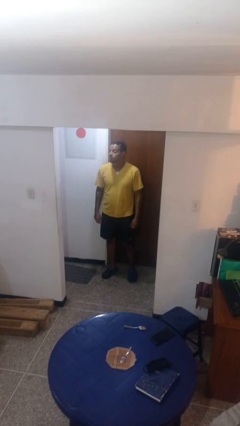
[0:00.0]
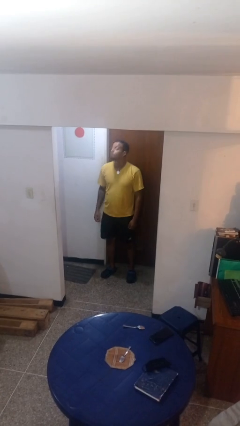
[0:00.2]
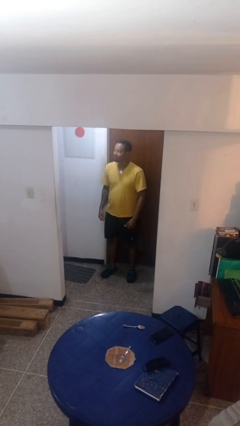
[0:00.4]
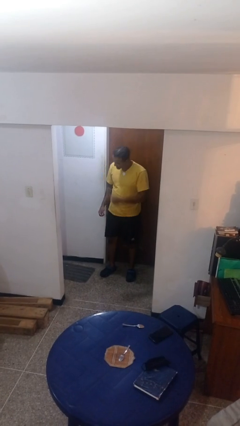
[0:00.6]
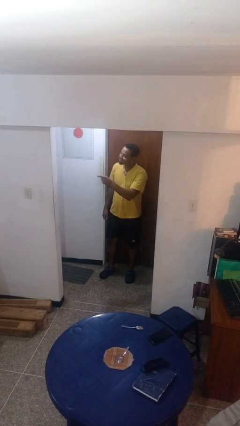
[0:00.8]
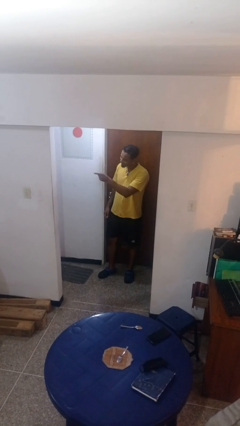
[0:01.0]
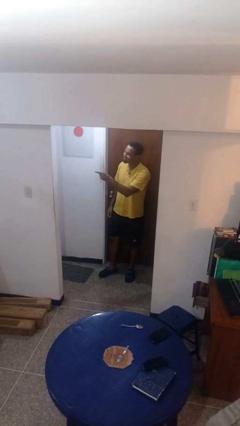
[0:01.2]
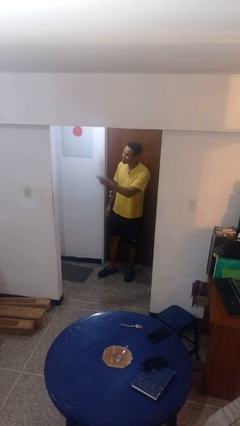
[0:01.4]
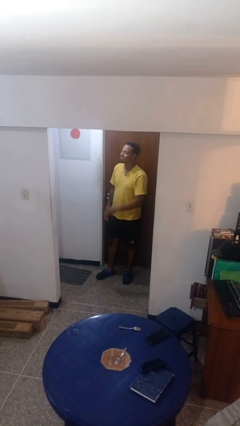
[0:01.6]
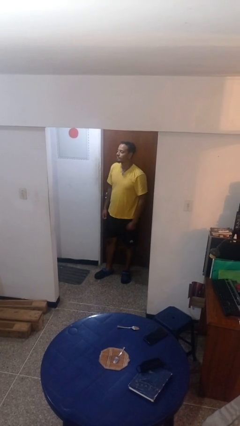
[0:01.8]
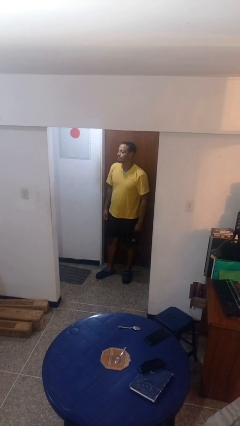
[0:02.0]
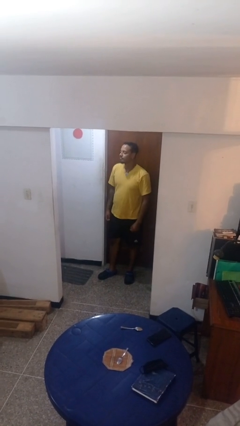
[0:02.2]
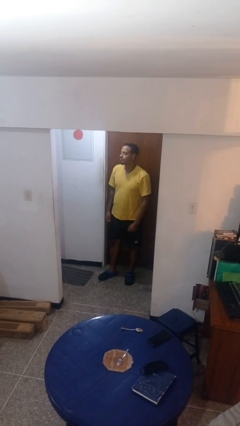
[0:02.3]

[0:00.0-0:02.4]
person nods head

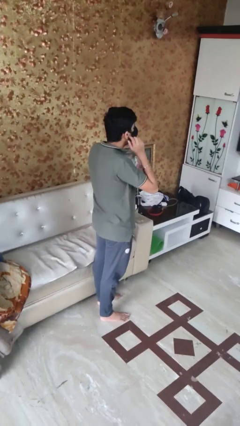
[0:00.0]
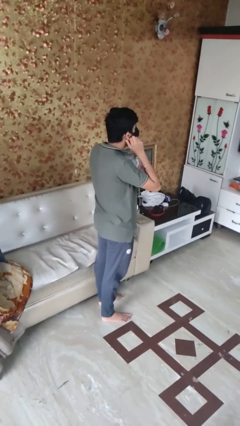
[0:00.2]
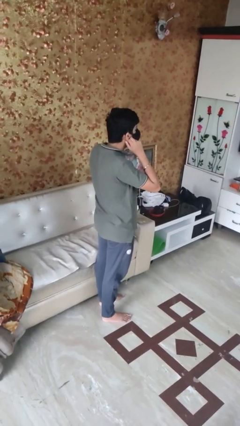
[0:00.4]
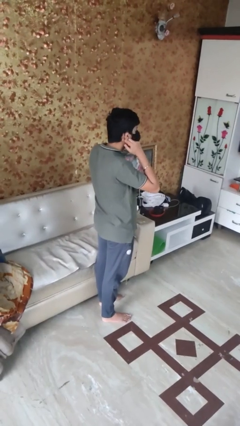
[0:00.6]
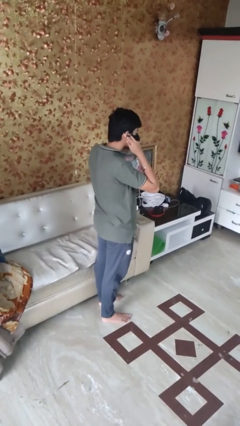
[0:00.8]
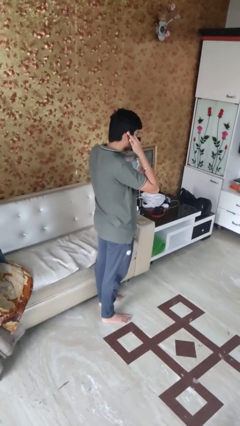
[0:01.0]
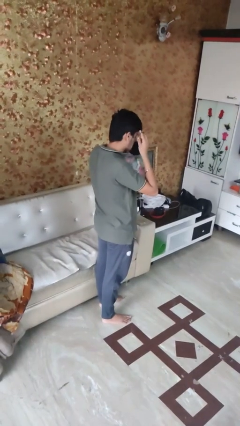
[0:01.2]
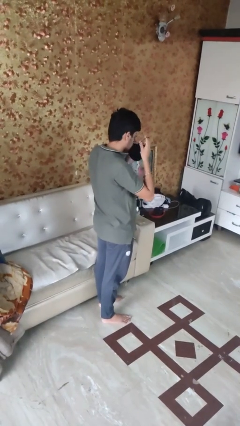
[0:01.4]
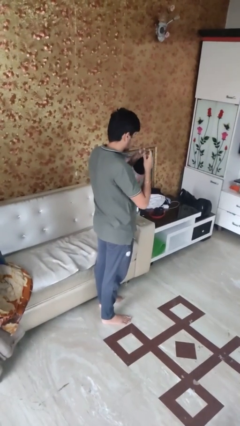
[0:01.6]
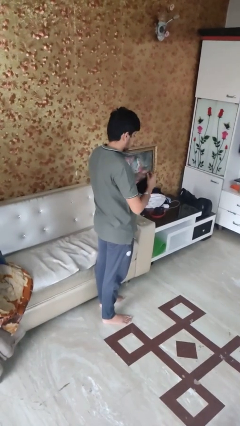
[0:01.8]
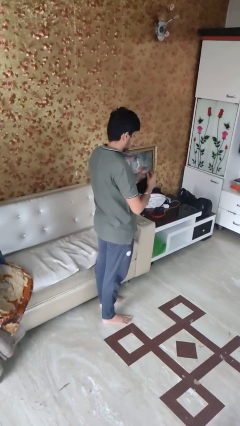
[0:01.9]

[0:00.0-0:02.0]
person takes off facemask

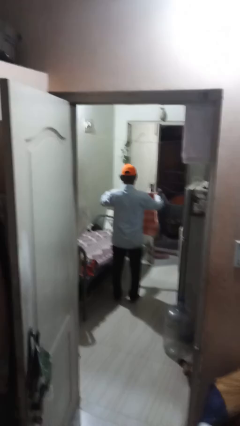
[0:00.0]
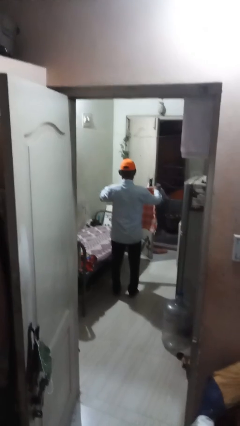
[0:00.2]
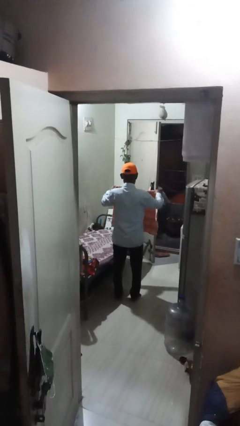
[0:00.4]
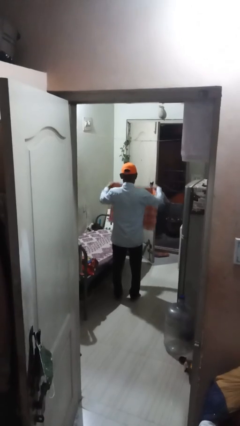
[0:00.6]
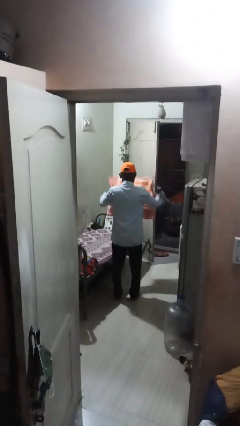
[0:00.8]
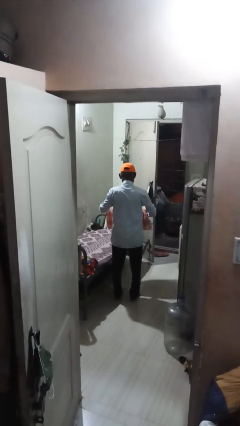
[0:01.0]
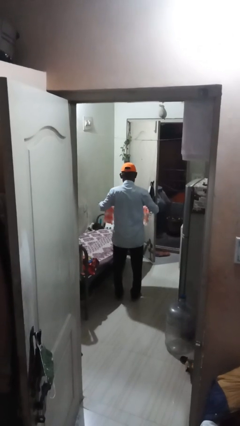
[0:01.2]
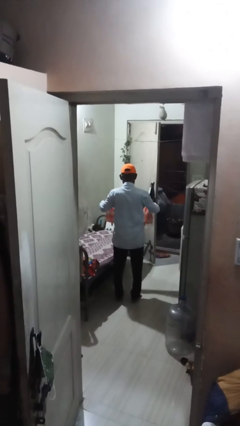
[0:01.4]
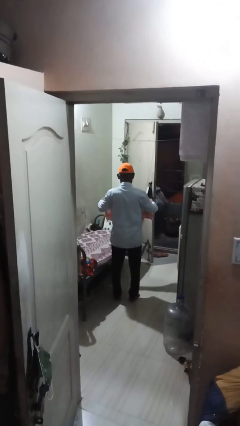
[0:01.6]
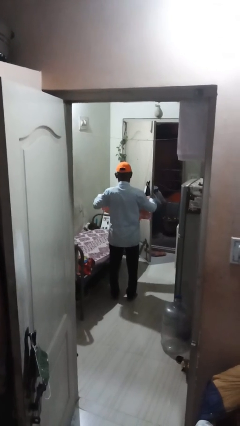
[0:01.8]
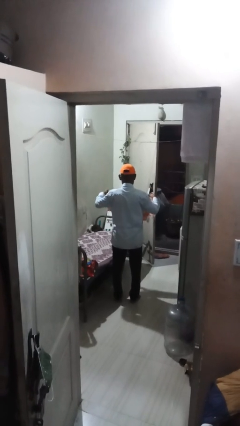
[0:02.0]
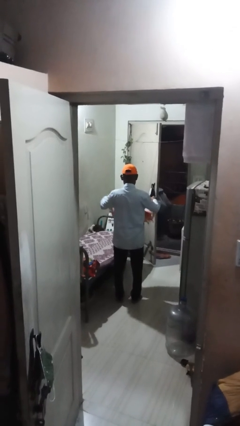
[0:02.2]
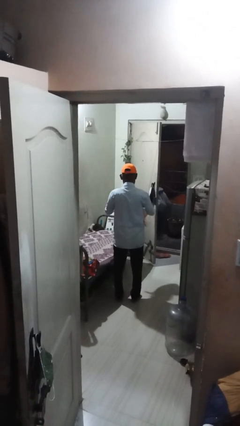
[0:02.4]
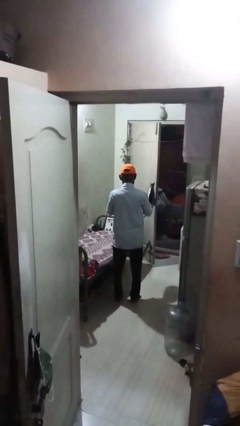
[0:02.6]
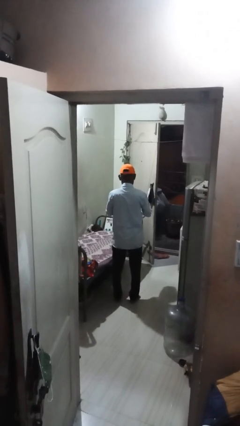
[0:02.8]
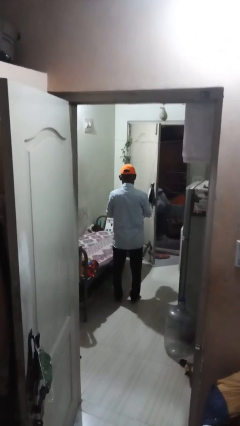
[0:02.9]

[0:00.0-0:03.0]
person folds towel

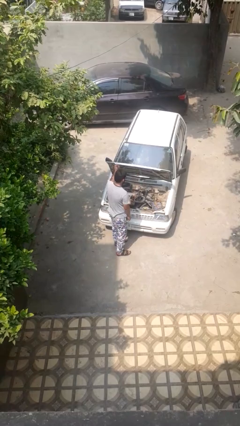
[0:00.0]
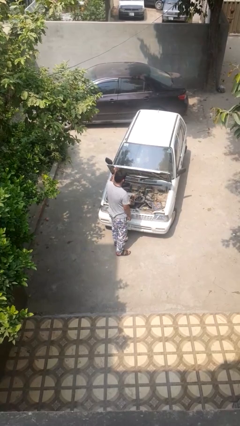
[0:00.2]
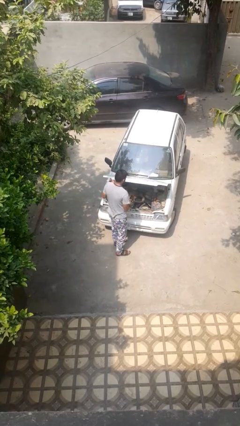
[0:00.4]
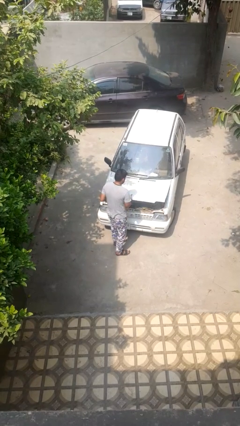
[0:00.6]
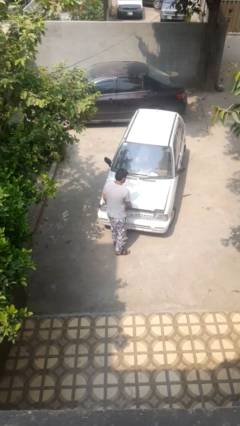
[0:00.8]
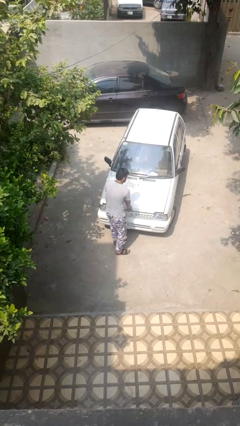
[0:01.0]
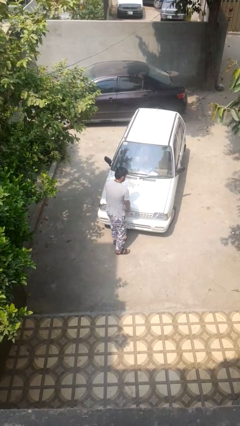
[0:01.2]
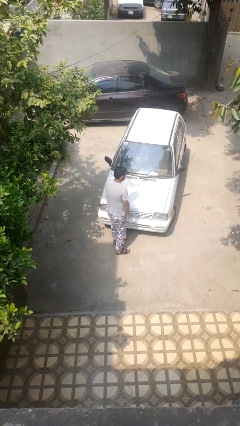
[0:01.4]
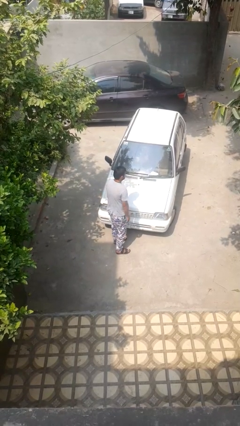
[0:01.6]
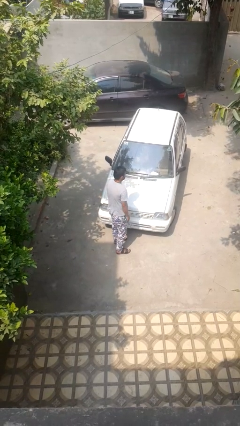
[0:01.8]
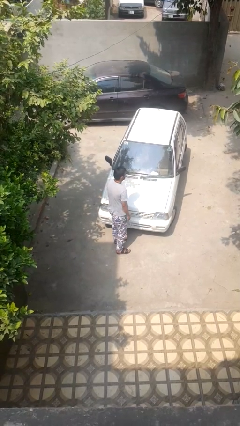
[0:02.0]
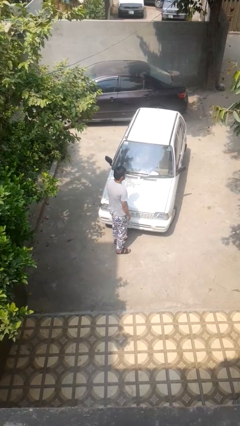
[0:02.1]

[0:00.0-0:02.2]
person closes car hood

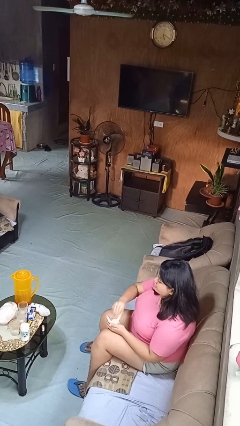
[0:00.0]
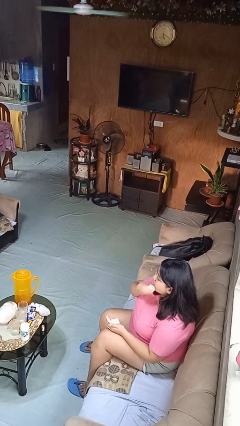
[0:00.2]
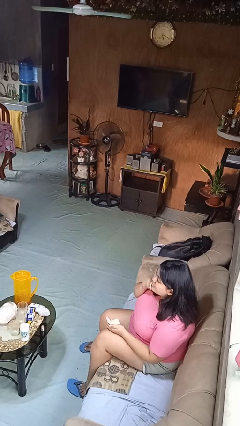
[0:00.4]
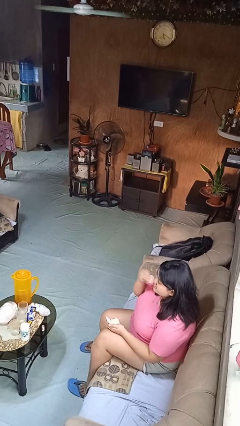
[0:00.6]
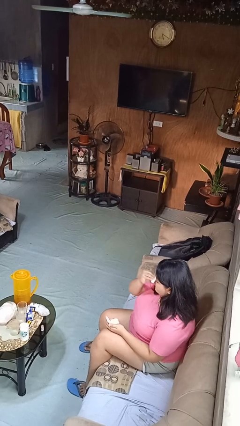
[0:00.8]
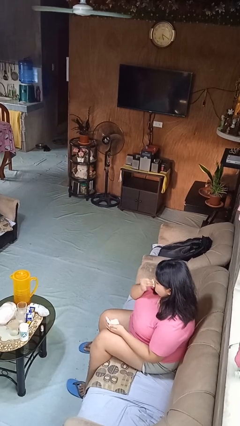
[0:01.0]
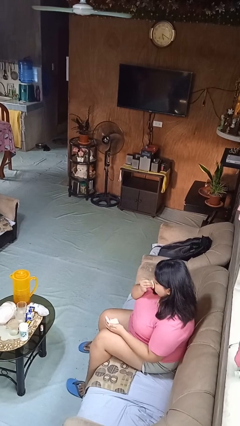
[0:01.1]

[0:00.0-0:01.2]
person applies foundation makeup

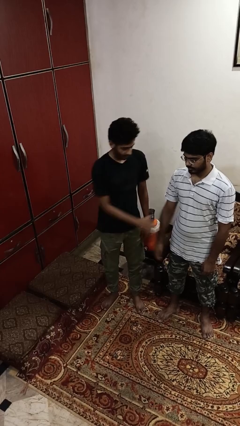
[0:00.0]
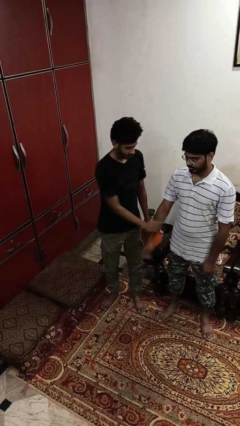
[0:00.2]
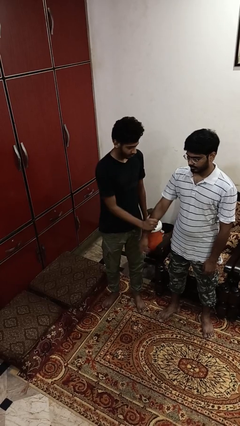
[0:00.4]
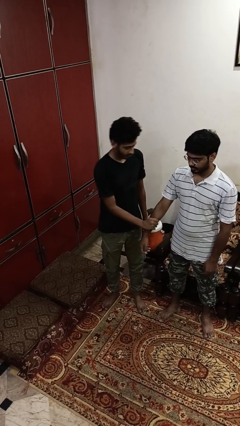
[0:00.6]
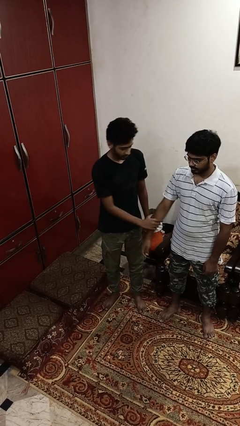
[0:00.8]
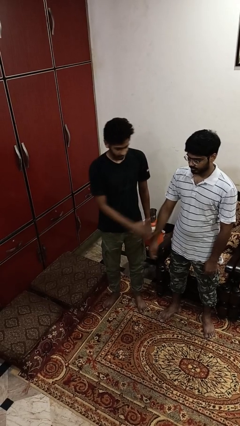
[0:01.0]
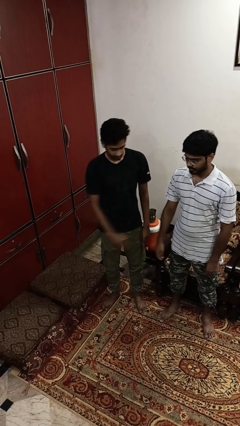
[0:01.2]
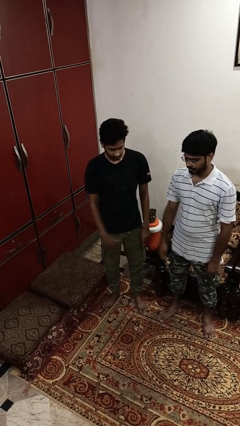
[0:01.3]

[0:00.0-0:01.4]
person grabs person by forearm

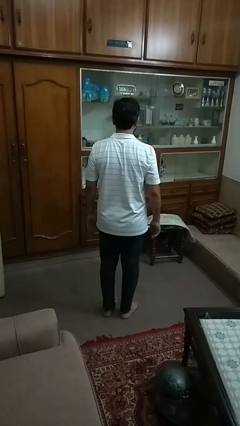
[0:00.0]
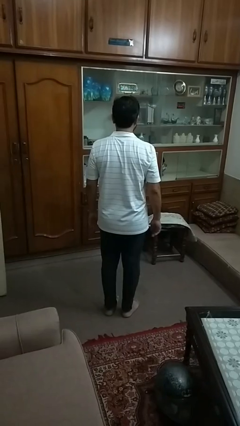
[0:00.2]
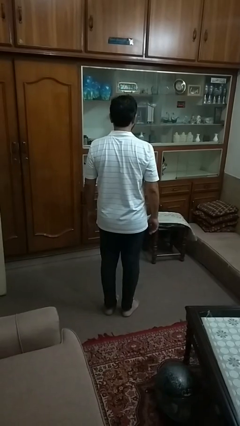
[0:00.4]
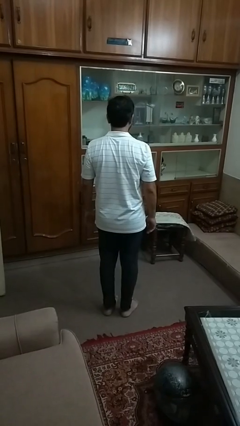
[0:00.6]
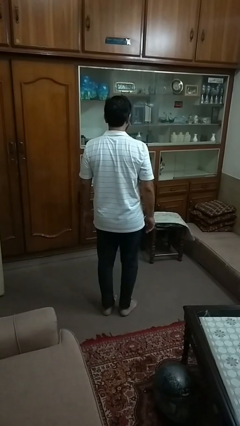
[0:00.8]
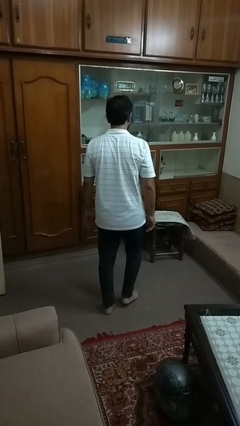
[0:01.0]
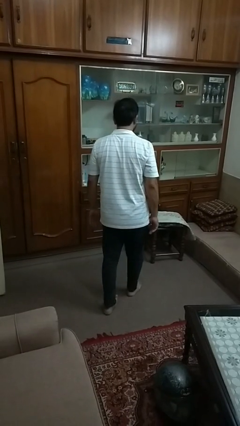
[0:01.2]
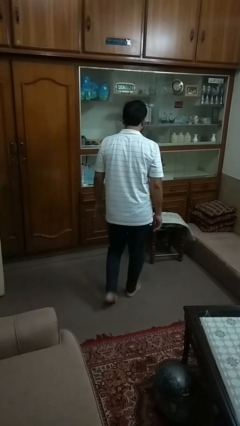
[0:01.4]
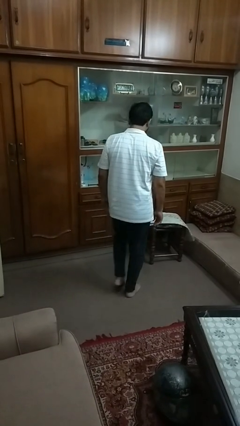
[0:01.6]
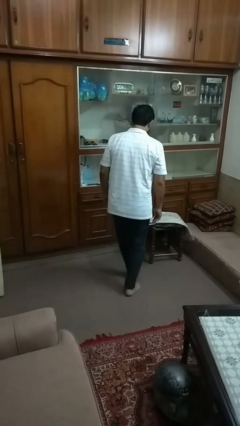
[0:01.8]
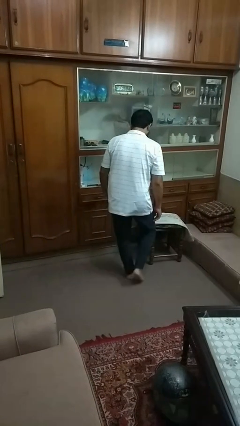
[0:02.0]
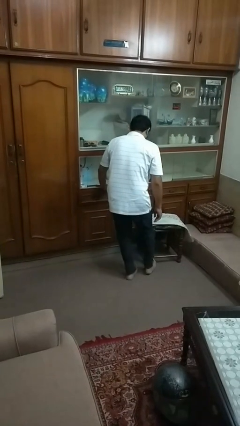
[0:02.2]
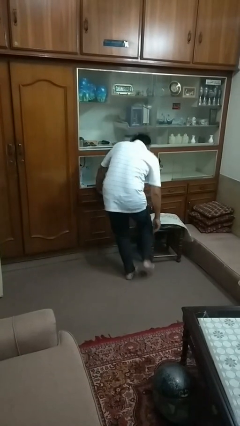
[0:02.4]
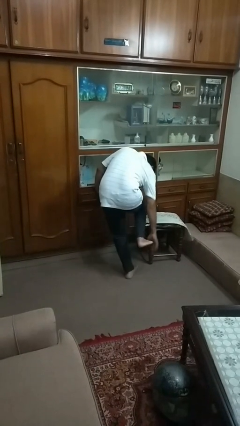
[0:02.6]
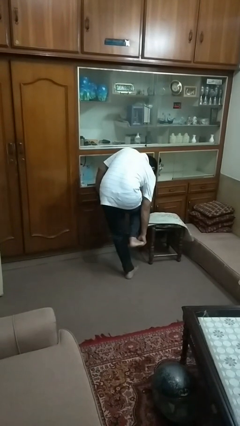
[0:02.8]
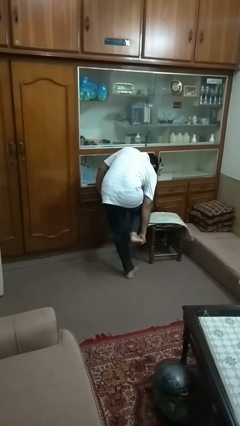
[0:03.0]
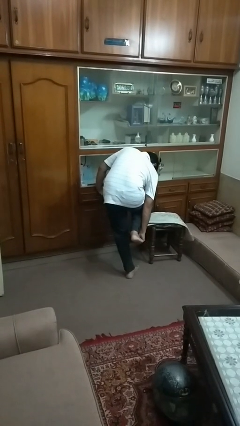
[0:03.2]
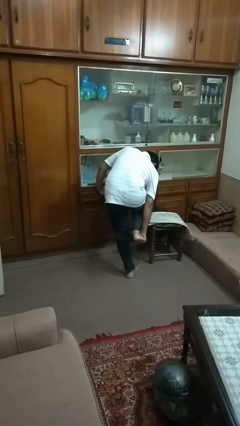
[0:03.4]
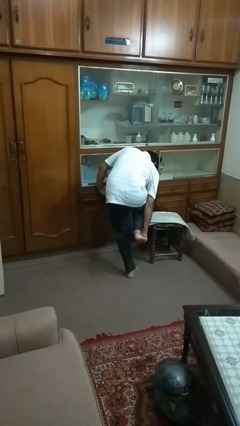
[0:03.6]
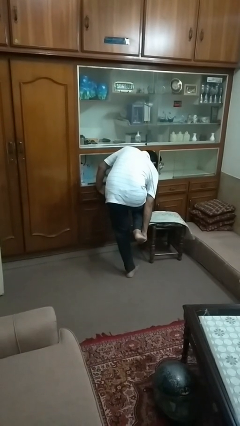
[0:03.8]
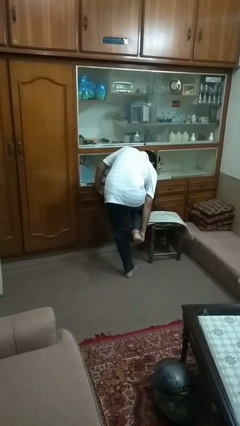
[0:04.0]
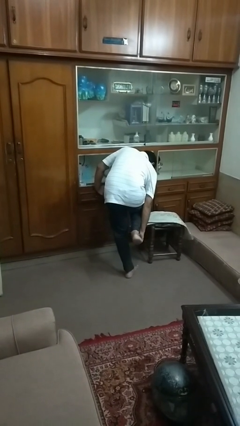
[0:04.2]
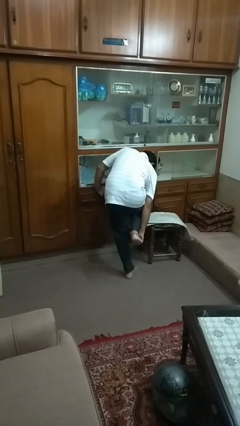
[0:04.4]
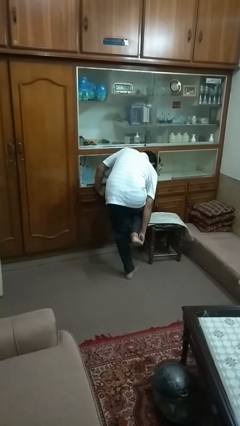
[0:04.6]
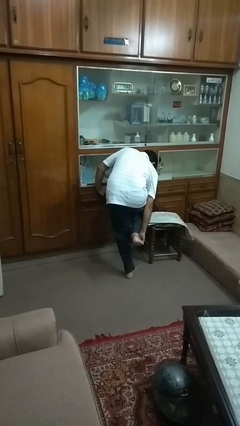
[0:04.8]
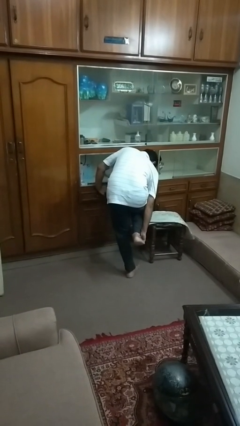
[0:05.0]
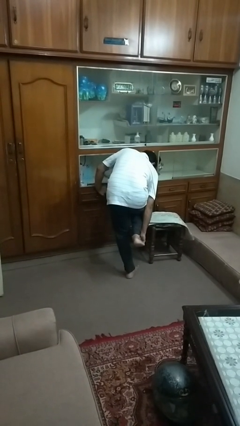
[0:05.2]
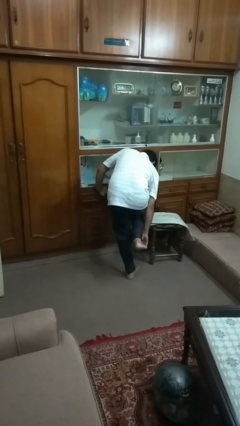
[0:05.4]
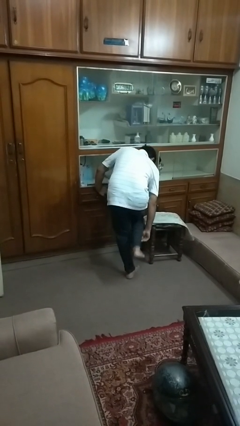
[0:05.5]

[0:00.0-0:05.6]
person stubs toe
